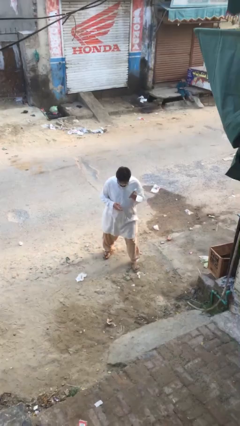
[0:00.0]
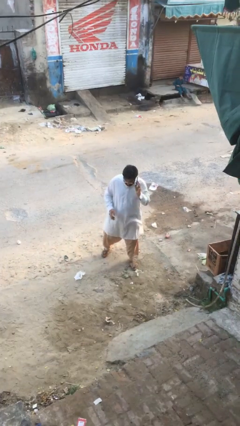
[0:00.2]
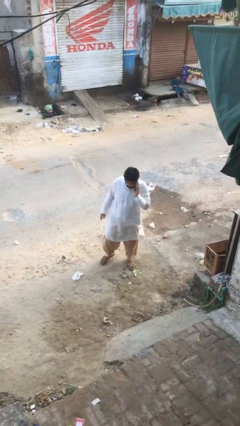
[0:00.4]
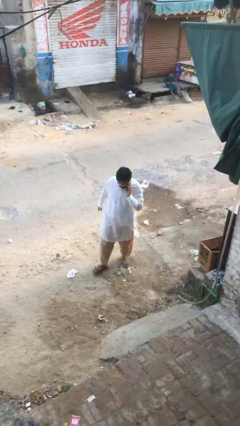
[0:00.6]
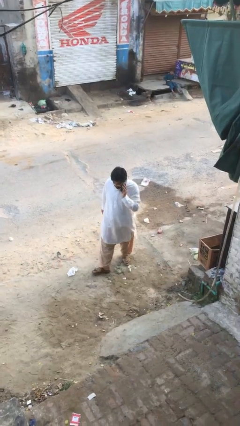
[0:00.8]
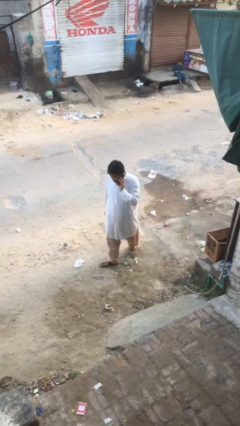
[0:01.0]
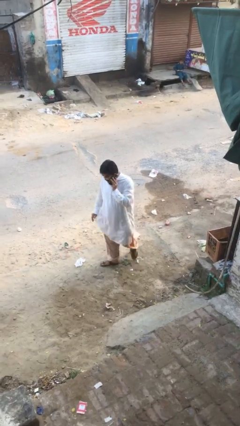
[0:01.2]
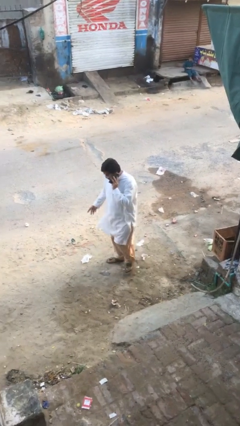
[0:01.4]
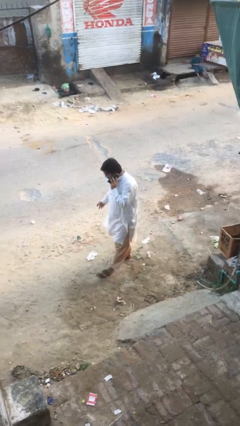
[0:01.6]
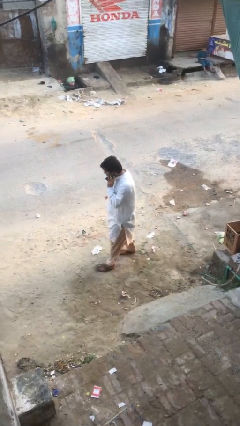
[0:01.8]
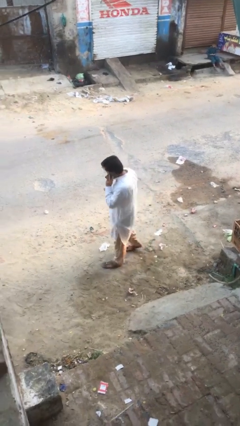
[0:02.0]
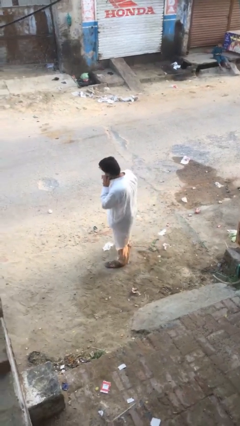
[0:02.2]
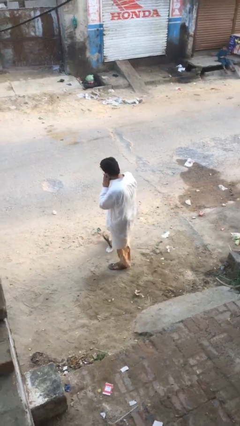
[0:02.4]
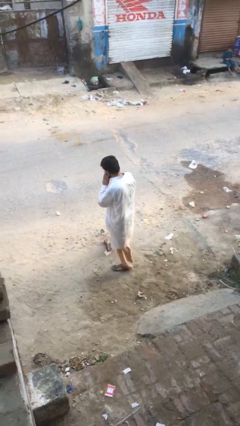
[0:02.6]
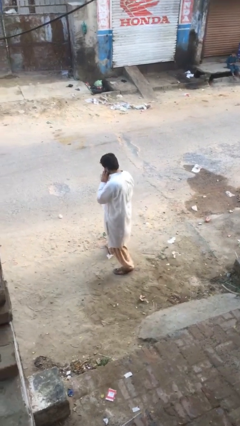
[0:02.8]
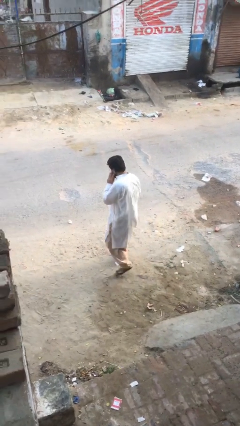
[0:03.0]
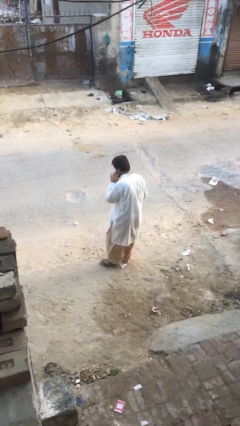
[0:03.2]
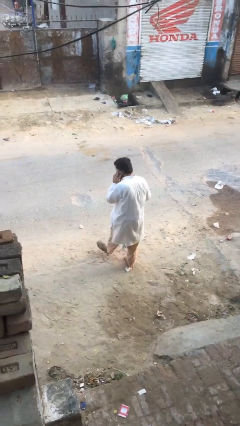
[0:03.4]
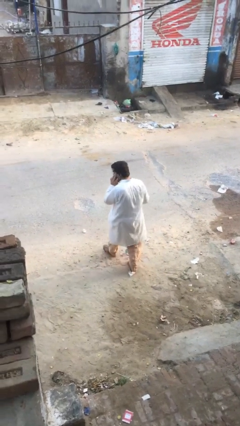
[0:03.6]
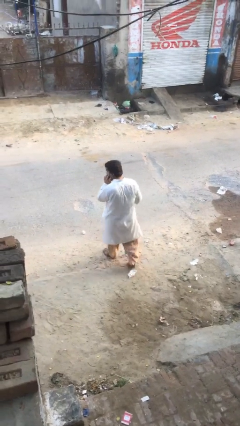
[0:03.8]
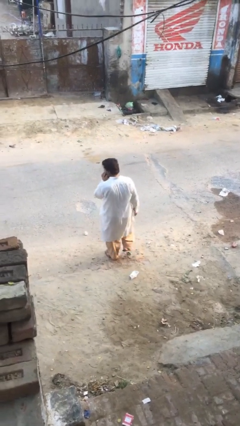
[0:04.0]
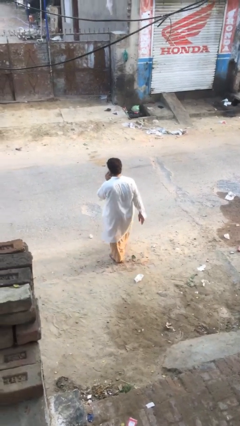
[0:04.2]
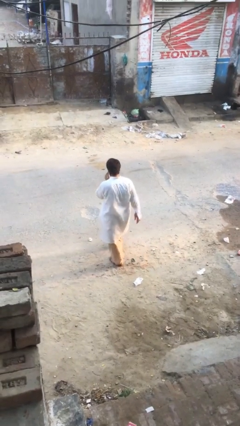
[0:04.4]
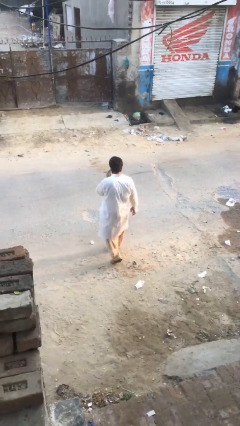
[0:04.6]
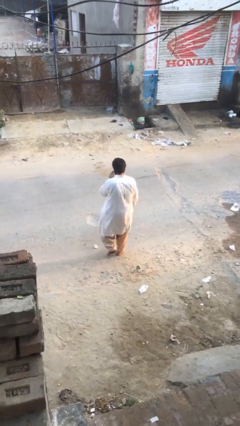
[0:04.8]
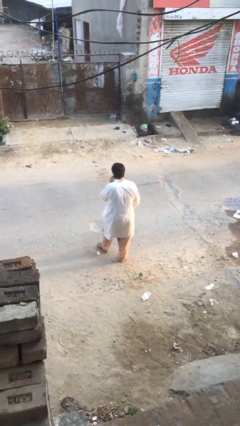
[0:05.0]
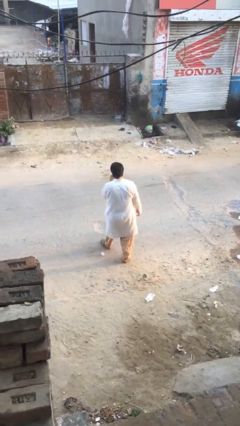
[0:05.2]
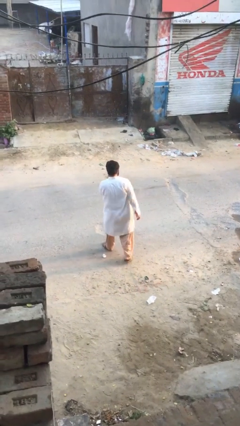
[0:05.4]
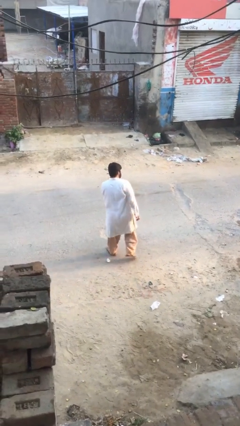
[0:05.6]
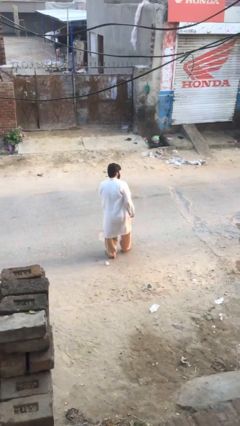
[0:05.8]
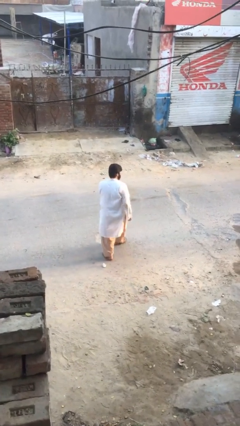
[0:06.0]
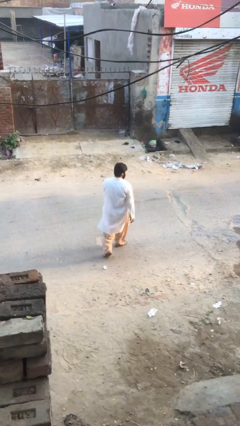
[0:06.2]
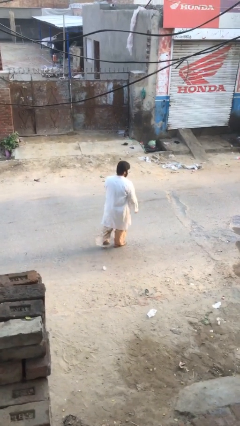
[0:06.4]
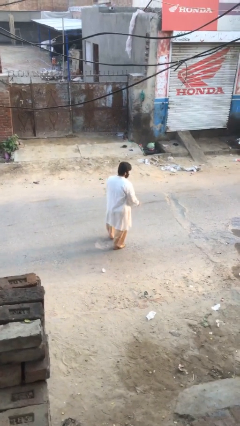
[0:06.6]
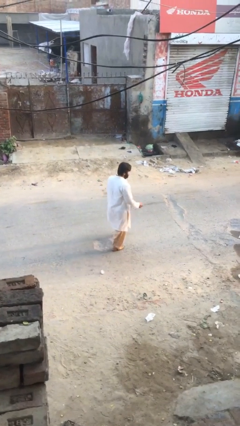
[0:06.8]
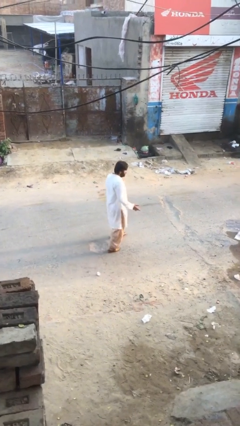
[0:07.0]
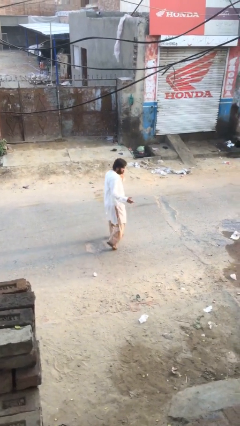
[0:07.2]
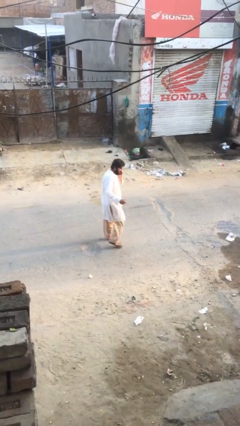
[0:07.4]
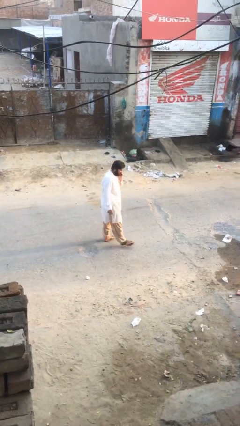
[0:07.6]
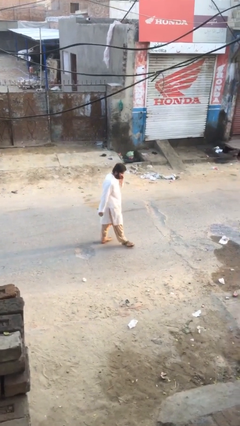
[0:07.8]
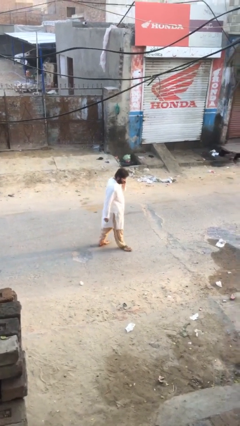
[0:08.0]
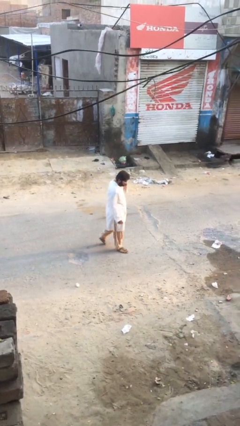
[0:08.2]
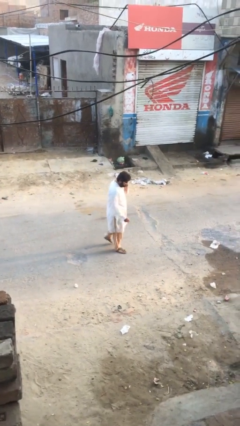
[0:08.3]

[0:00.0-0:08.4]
person talks on phone

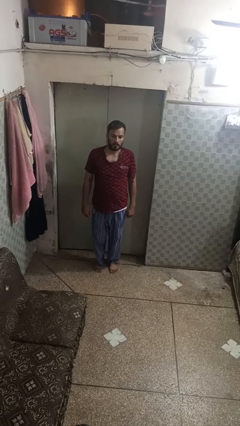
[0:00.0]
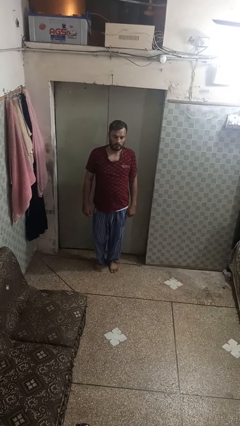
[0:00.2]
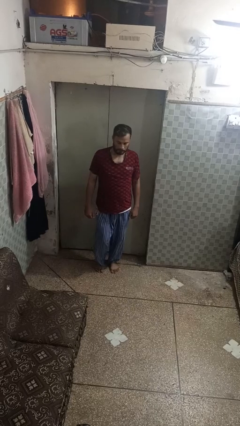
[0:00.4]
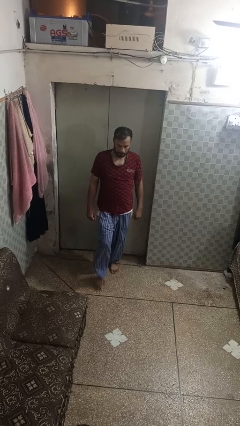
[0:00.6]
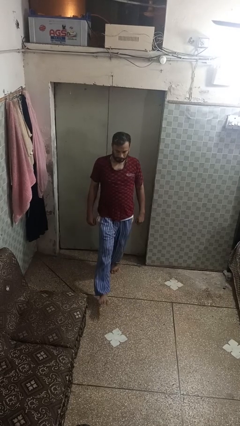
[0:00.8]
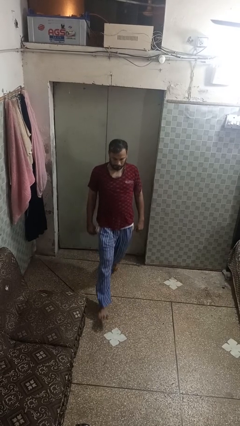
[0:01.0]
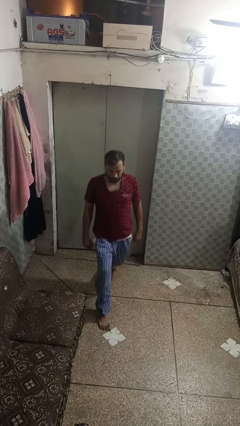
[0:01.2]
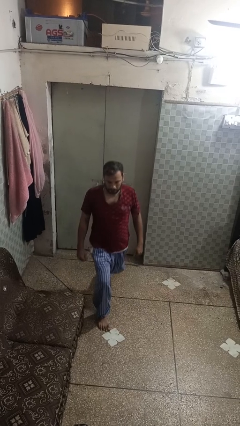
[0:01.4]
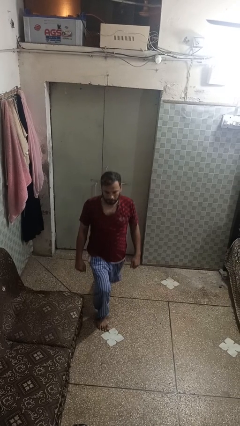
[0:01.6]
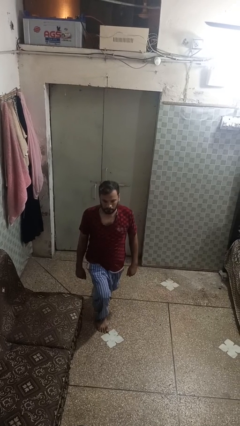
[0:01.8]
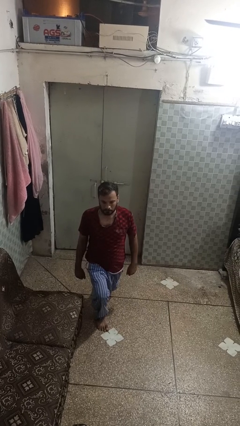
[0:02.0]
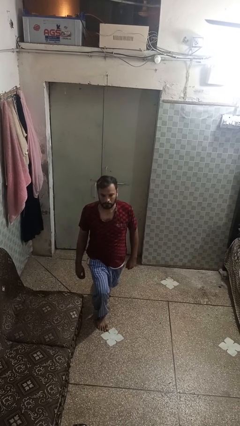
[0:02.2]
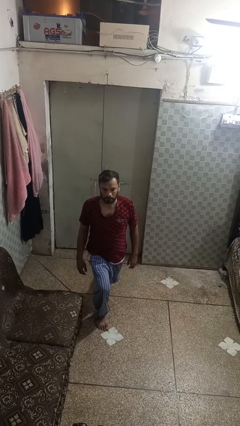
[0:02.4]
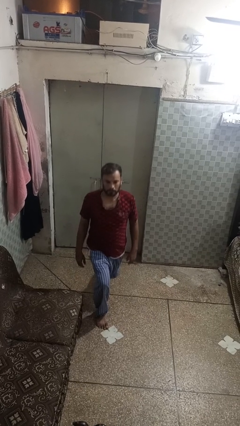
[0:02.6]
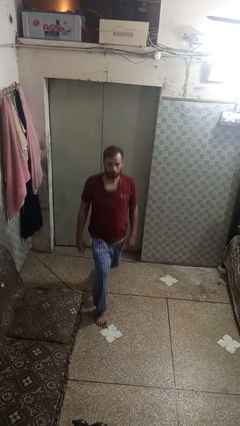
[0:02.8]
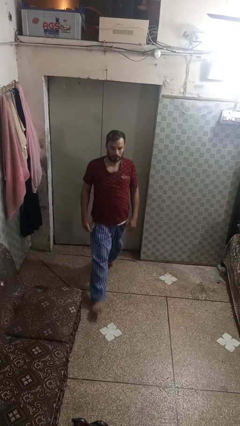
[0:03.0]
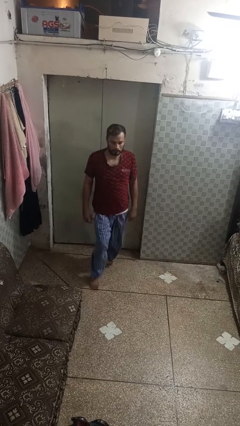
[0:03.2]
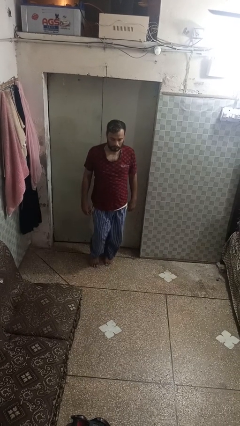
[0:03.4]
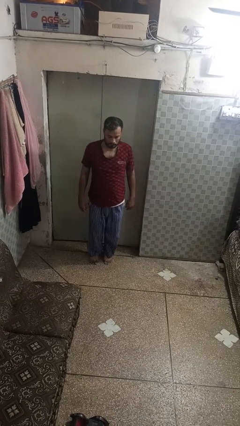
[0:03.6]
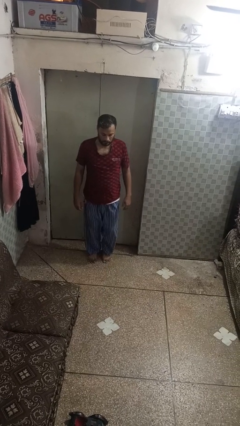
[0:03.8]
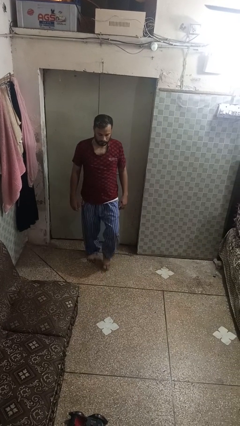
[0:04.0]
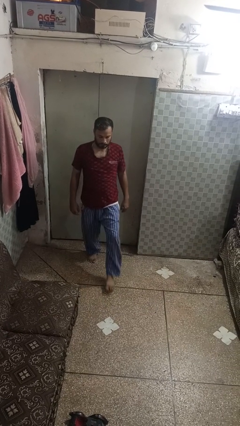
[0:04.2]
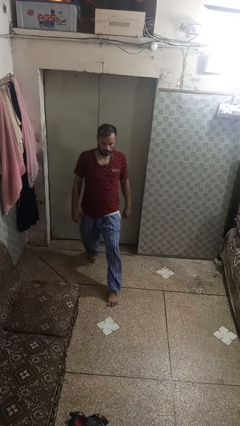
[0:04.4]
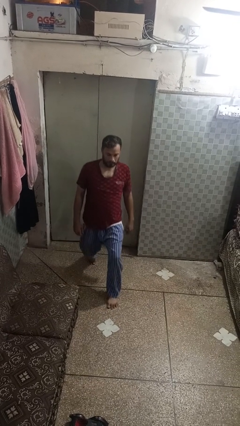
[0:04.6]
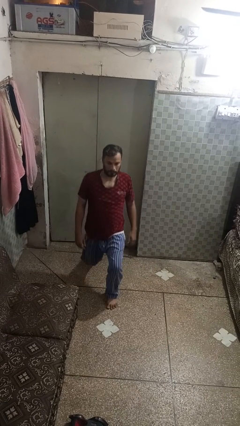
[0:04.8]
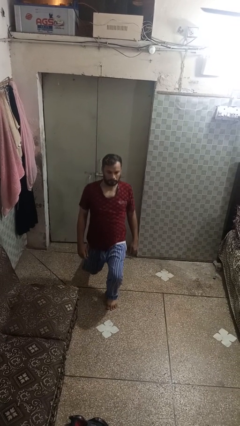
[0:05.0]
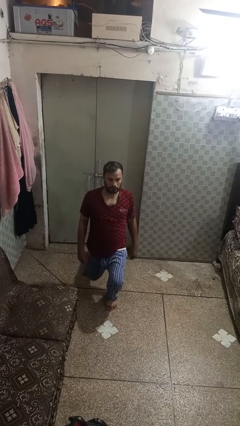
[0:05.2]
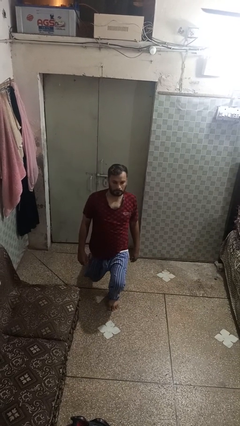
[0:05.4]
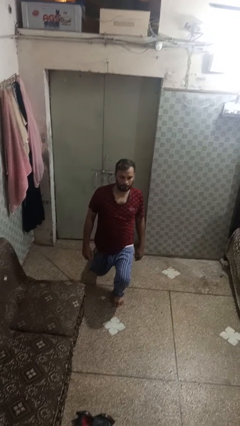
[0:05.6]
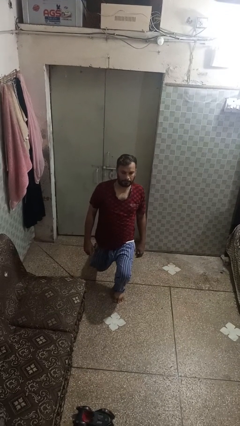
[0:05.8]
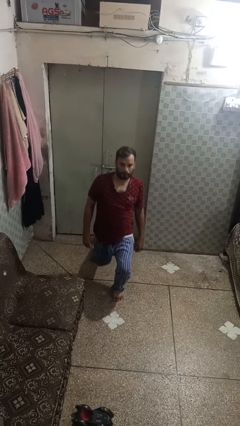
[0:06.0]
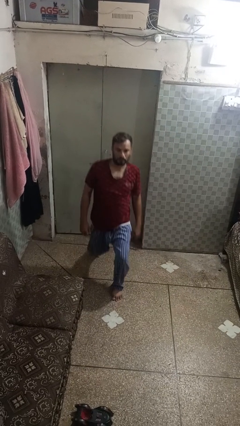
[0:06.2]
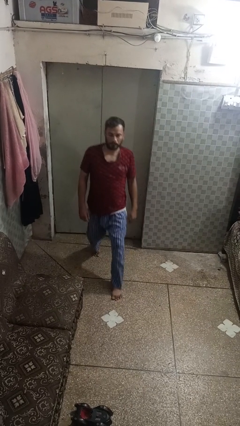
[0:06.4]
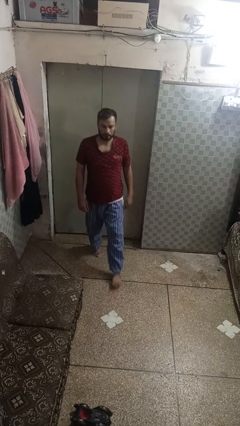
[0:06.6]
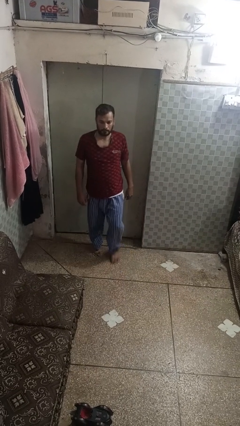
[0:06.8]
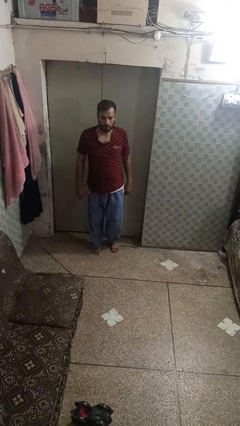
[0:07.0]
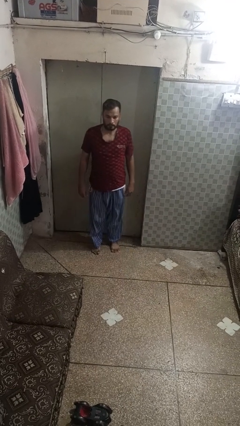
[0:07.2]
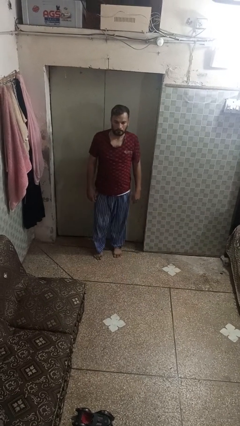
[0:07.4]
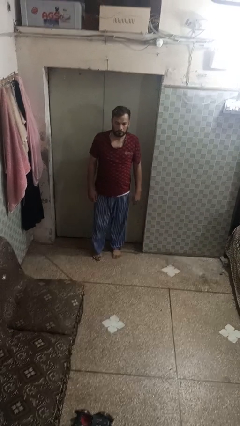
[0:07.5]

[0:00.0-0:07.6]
person exercises with lunges

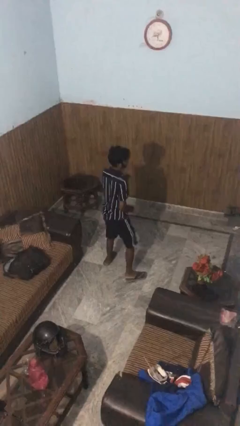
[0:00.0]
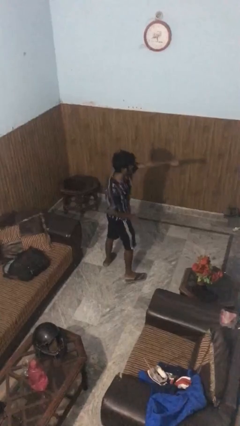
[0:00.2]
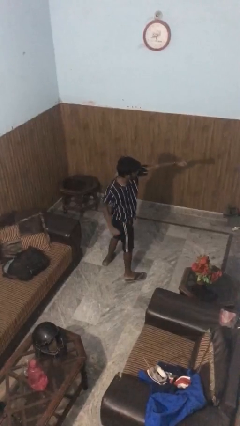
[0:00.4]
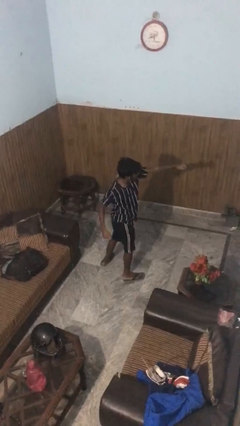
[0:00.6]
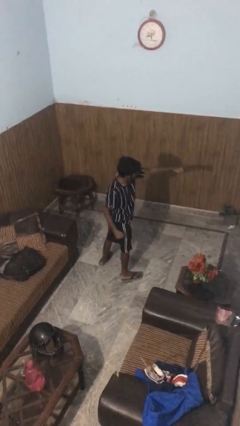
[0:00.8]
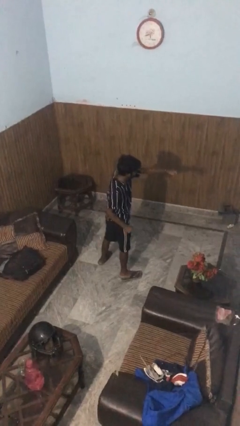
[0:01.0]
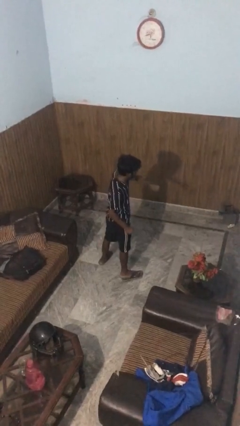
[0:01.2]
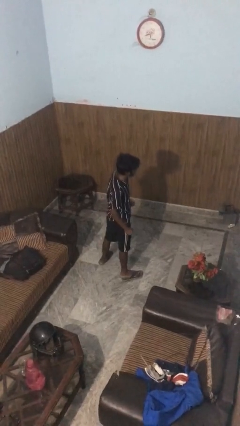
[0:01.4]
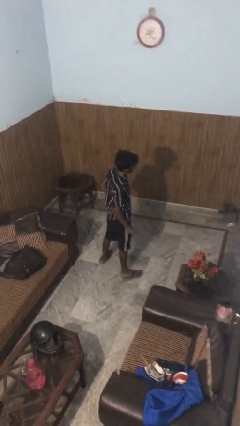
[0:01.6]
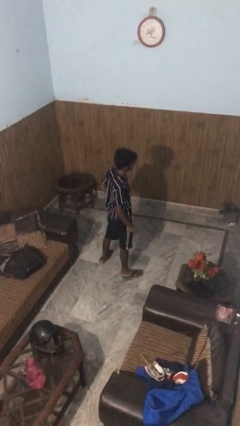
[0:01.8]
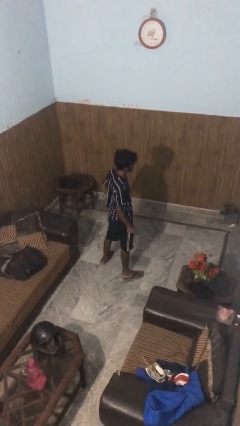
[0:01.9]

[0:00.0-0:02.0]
person punches
